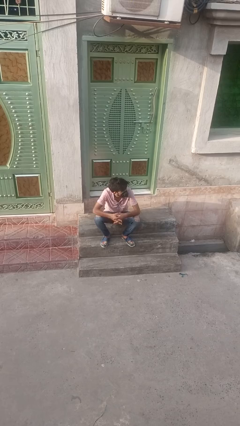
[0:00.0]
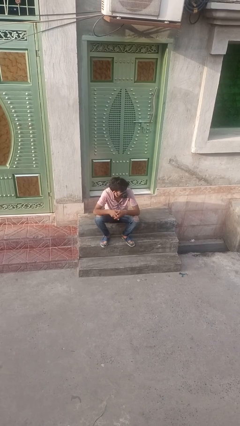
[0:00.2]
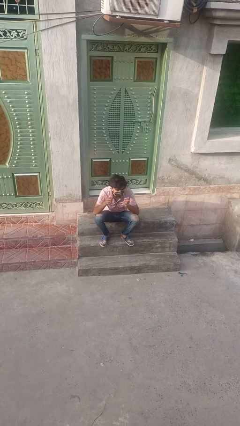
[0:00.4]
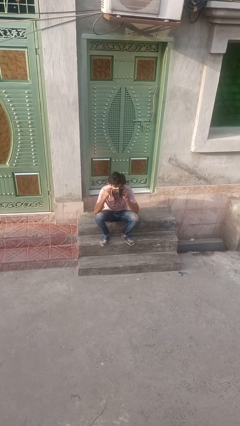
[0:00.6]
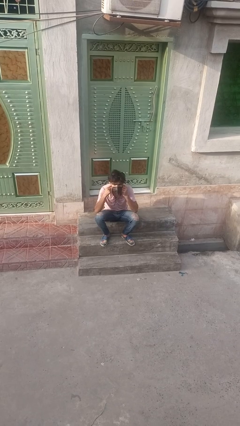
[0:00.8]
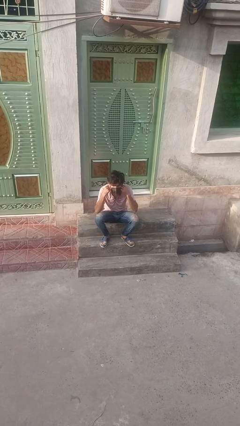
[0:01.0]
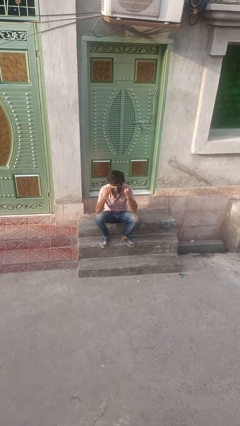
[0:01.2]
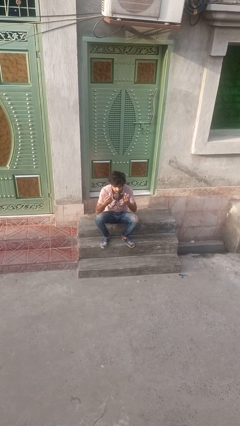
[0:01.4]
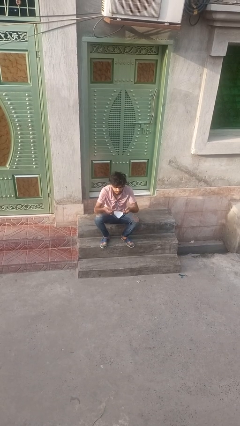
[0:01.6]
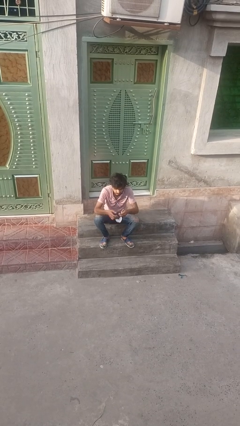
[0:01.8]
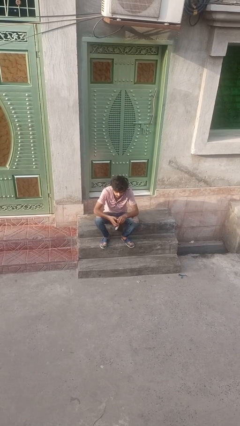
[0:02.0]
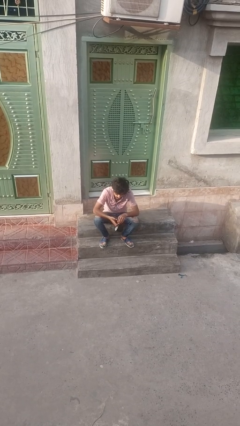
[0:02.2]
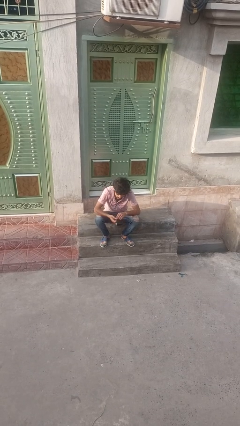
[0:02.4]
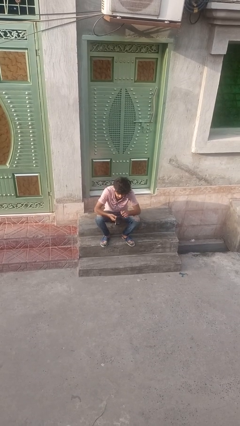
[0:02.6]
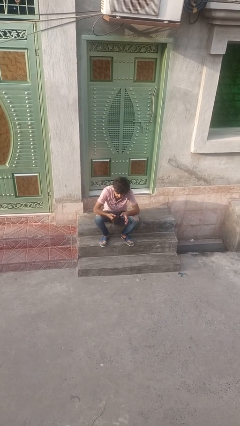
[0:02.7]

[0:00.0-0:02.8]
person takes off facemask

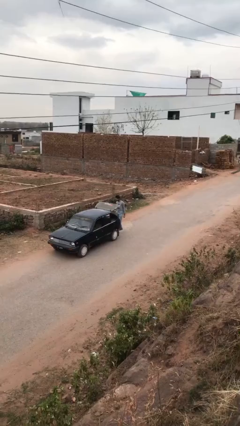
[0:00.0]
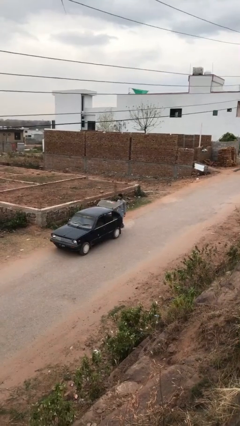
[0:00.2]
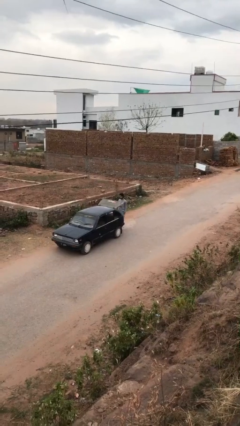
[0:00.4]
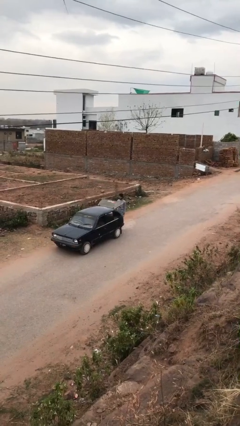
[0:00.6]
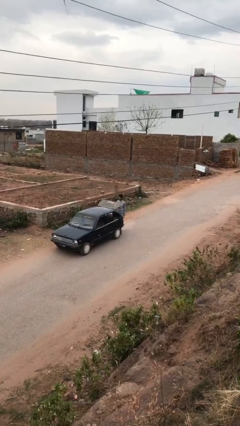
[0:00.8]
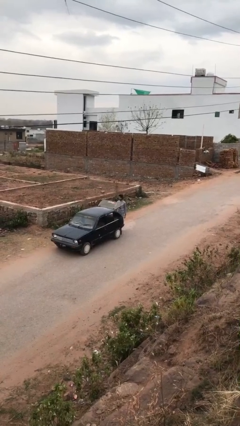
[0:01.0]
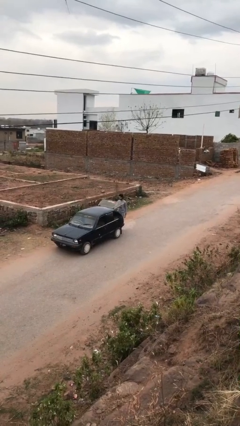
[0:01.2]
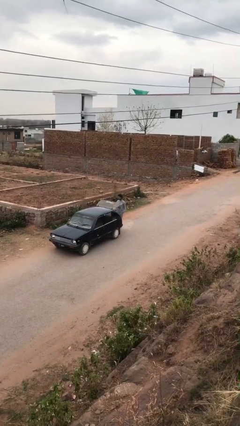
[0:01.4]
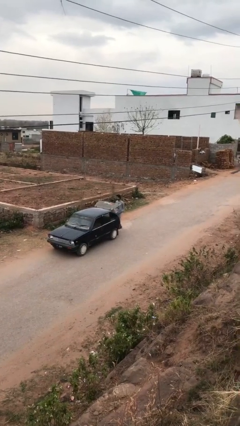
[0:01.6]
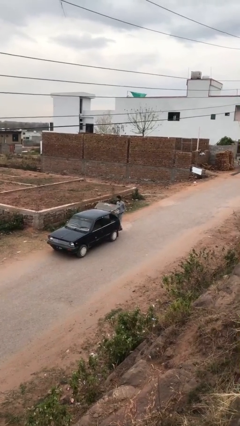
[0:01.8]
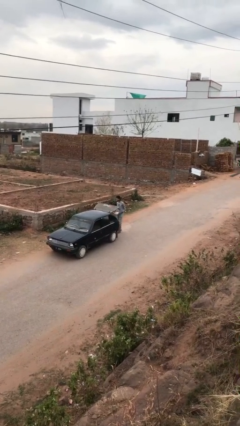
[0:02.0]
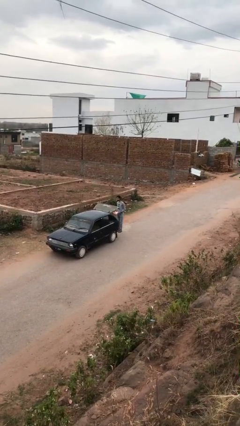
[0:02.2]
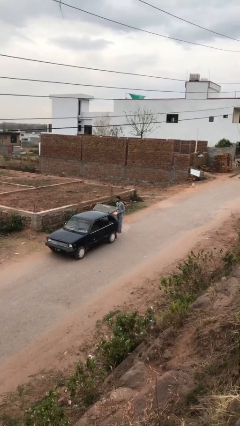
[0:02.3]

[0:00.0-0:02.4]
person unloads car

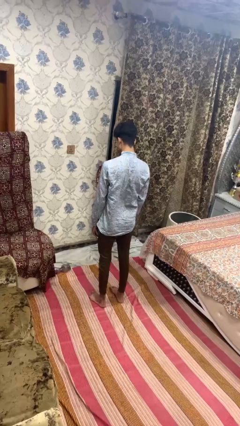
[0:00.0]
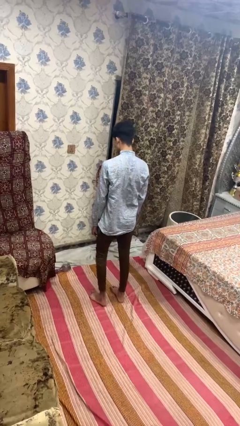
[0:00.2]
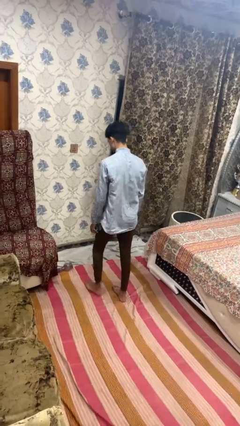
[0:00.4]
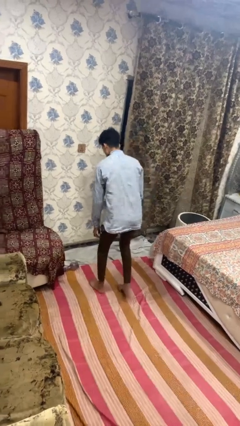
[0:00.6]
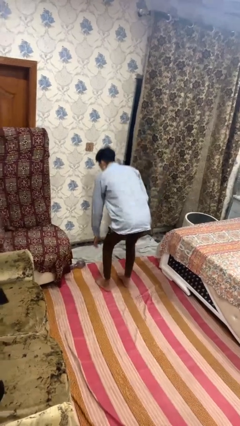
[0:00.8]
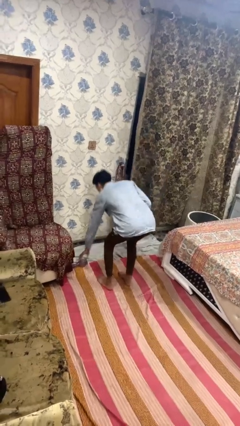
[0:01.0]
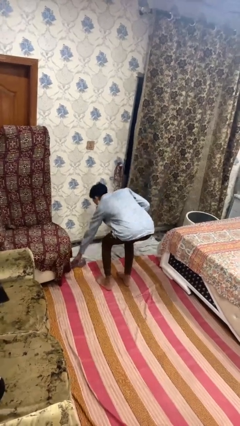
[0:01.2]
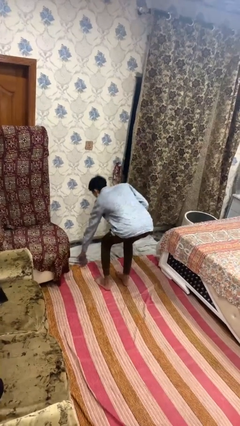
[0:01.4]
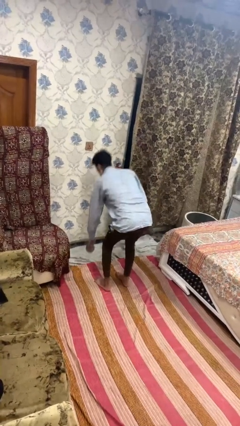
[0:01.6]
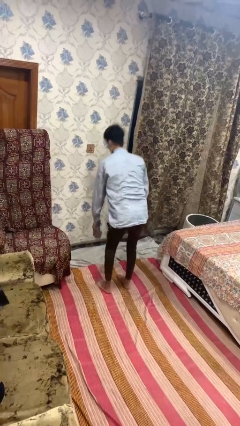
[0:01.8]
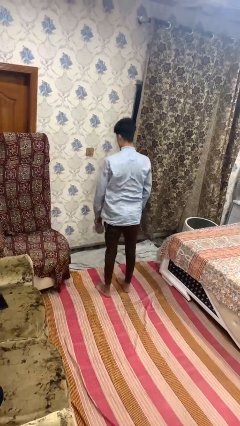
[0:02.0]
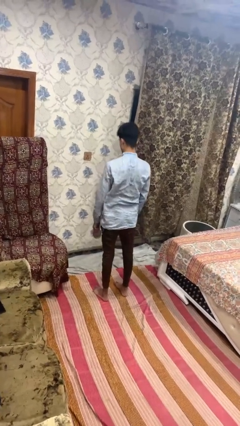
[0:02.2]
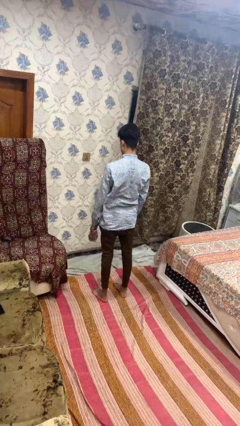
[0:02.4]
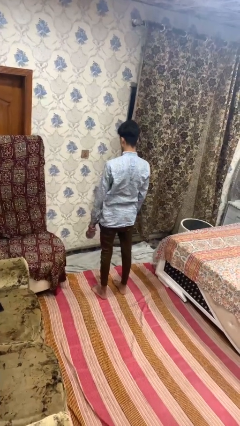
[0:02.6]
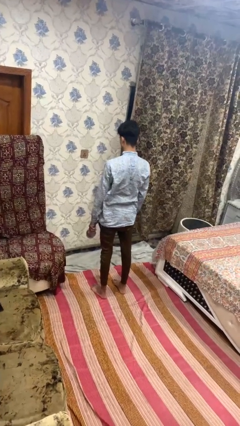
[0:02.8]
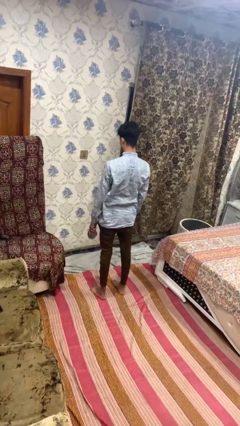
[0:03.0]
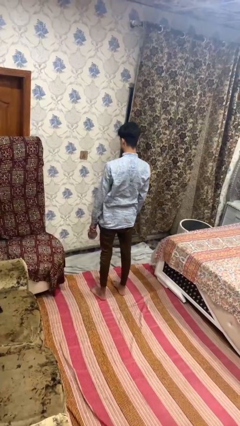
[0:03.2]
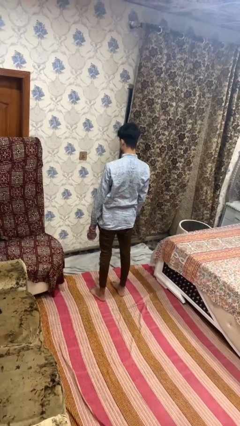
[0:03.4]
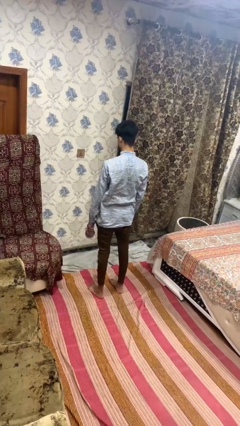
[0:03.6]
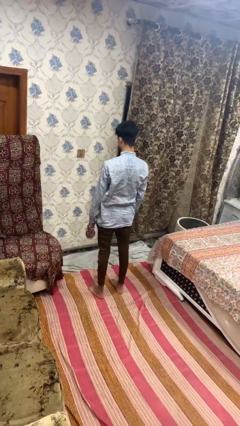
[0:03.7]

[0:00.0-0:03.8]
person picks up object from floor

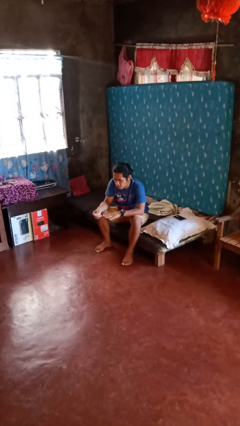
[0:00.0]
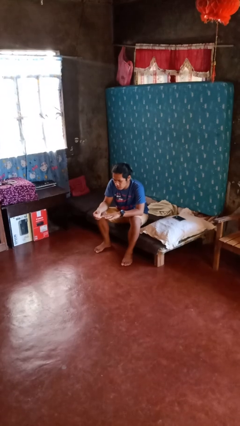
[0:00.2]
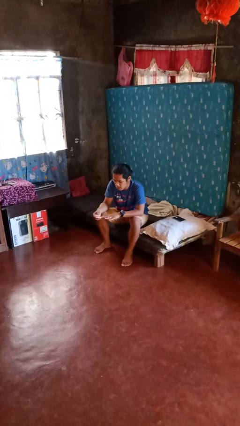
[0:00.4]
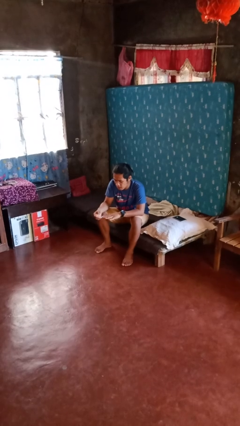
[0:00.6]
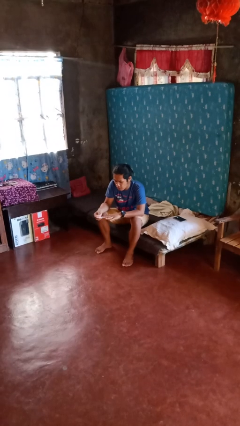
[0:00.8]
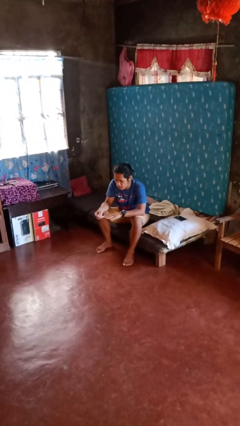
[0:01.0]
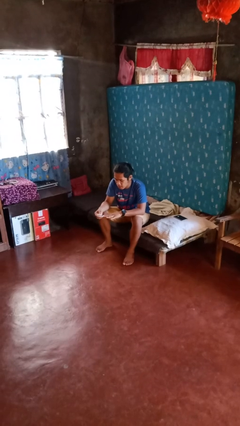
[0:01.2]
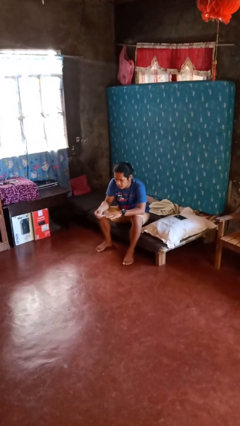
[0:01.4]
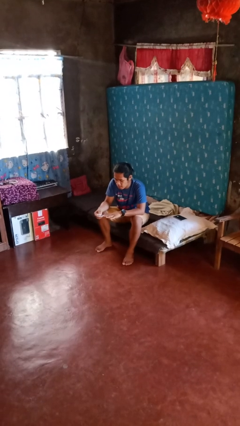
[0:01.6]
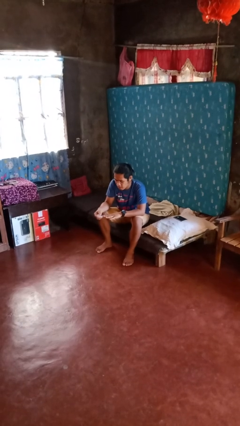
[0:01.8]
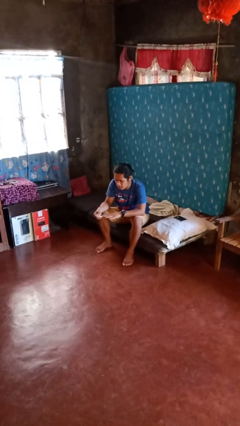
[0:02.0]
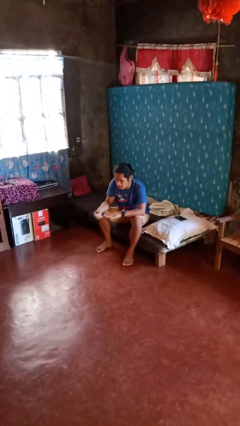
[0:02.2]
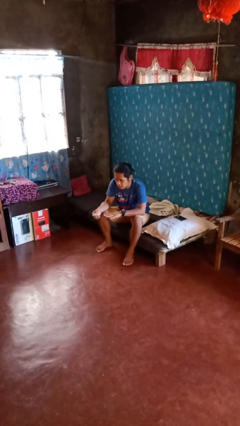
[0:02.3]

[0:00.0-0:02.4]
person clips fingernails

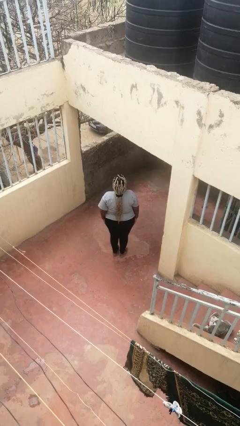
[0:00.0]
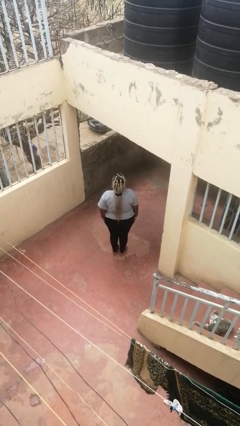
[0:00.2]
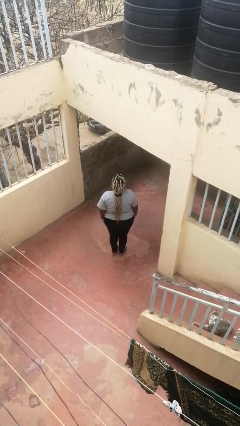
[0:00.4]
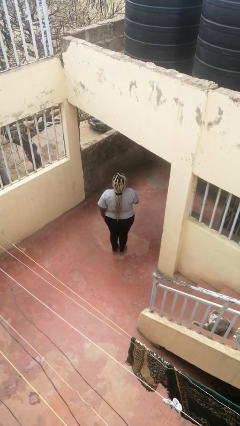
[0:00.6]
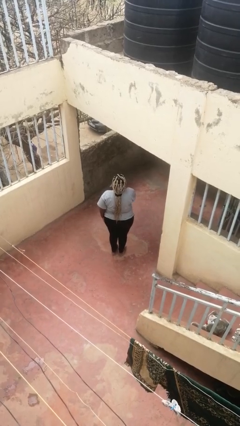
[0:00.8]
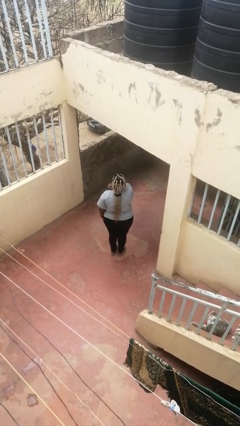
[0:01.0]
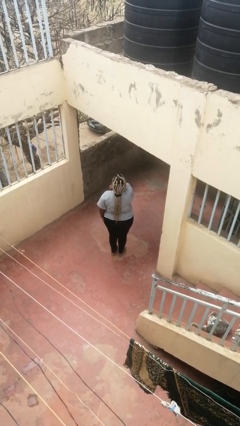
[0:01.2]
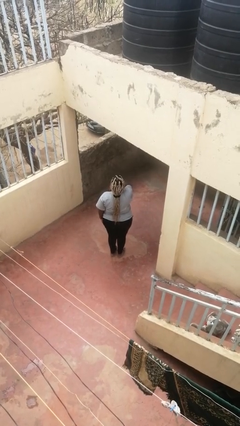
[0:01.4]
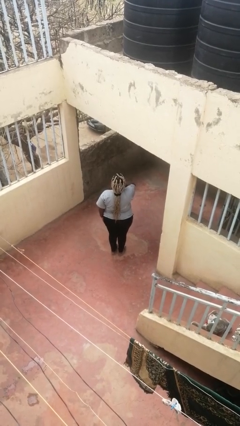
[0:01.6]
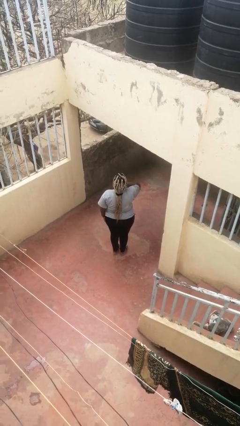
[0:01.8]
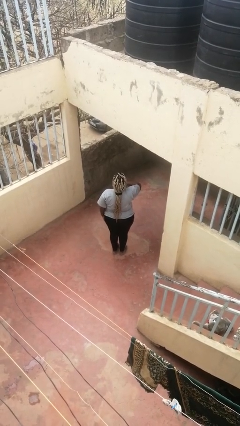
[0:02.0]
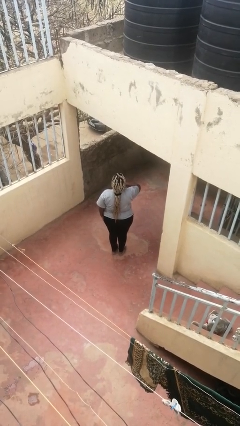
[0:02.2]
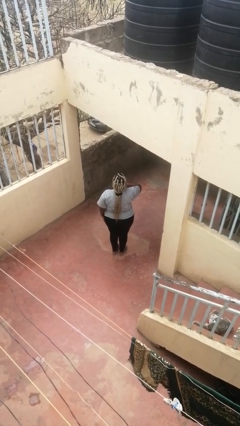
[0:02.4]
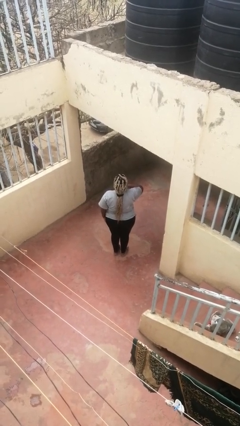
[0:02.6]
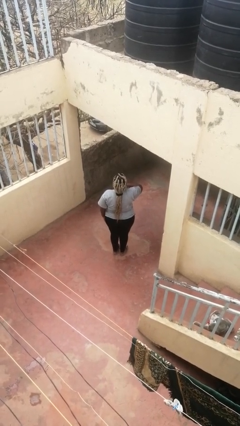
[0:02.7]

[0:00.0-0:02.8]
person gestures cut

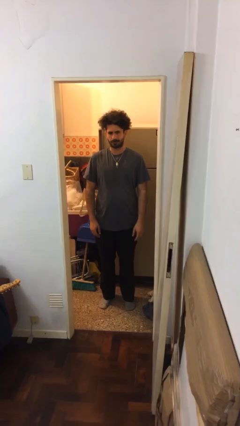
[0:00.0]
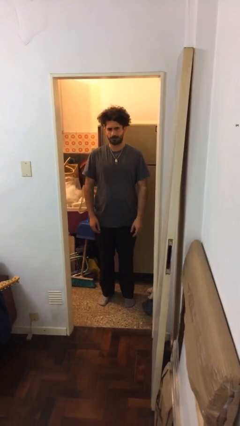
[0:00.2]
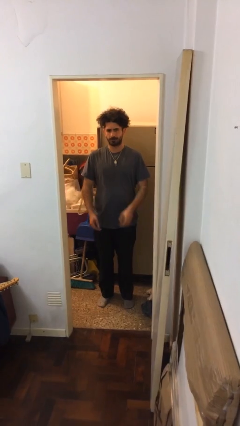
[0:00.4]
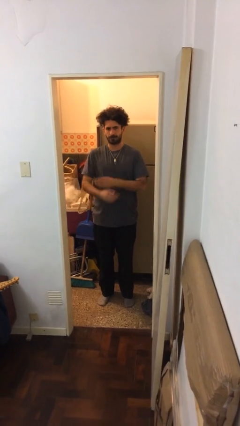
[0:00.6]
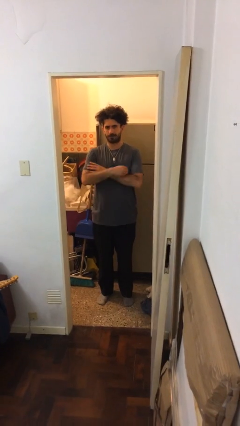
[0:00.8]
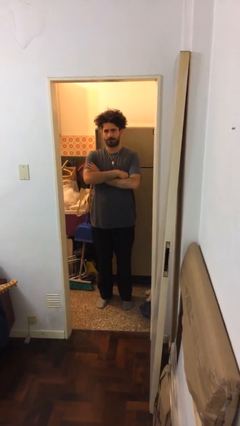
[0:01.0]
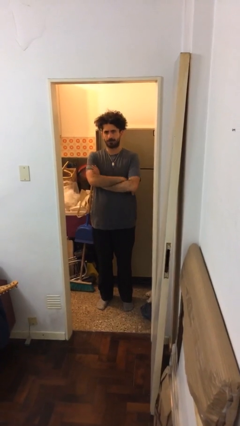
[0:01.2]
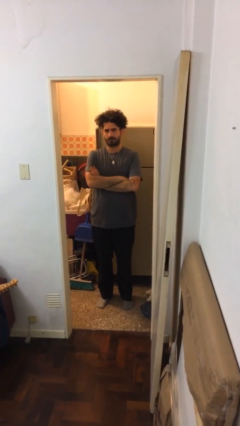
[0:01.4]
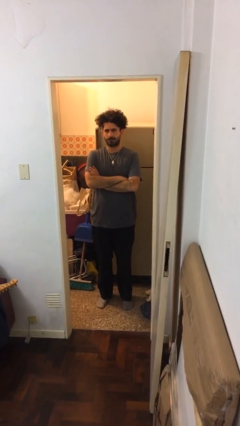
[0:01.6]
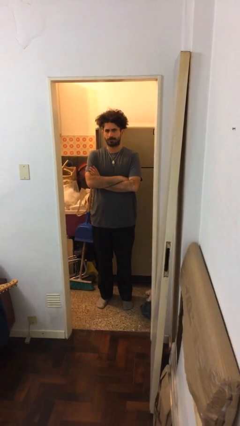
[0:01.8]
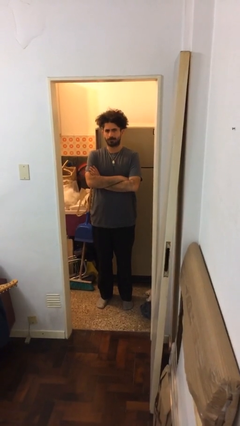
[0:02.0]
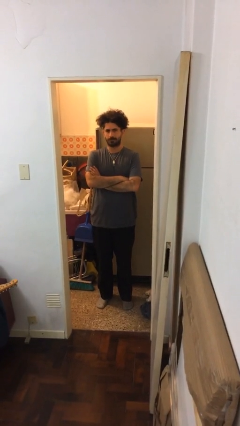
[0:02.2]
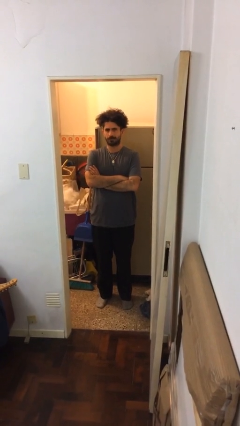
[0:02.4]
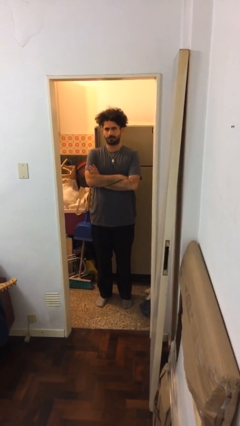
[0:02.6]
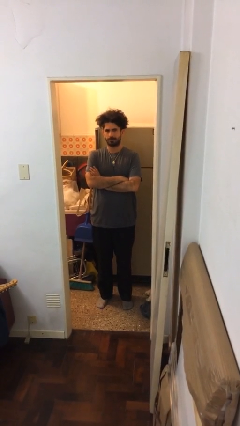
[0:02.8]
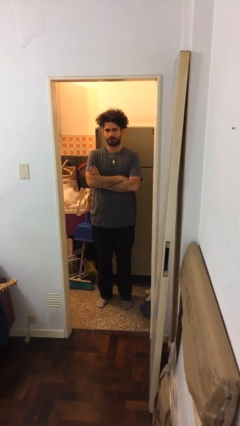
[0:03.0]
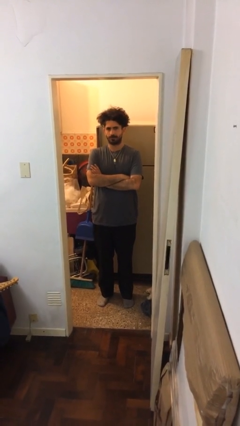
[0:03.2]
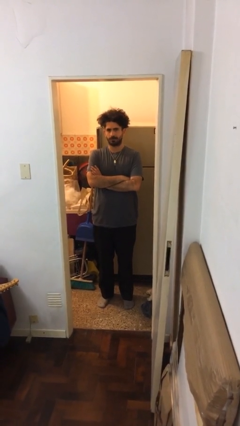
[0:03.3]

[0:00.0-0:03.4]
person crosses arms

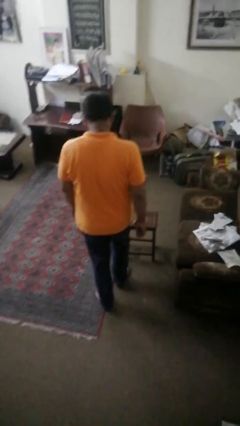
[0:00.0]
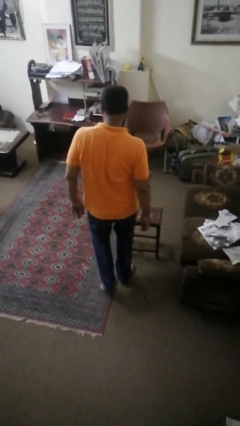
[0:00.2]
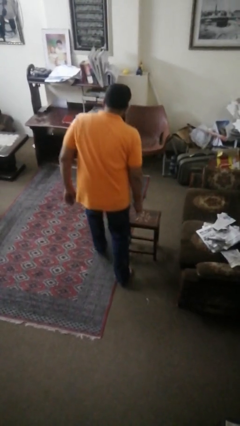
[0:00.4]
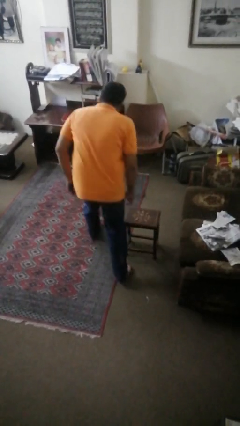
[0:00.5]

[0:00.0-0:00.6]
person bumps into table
